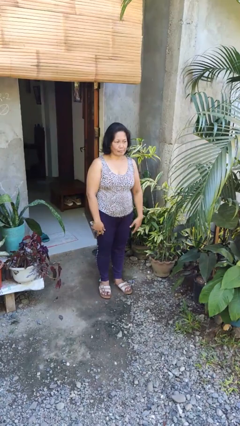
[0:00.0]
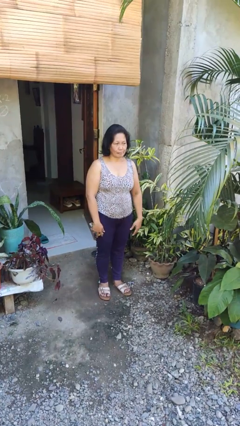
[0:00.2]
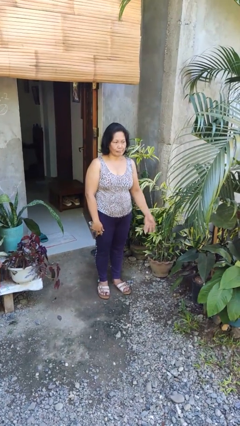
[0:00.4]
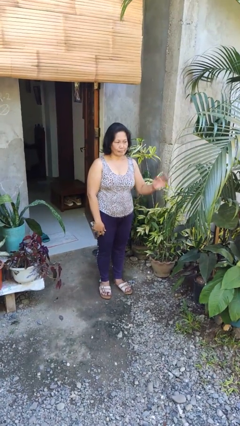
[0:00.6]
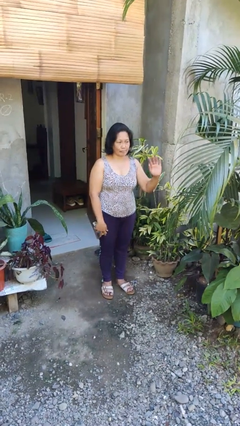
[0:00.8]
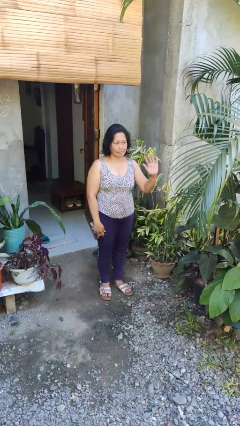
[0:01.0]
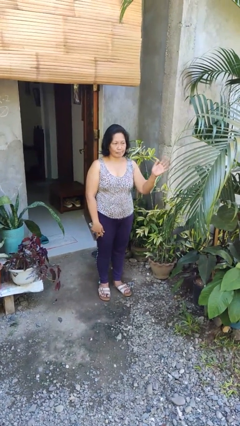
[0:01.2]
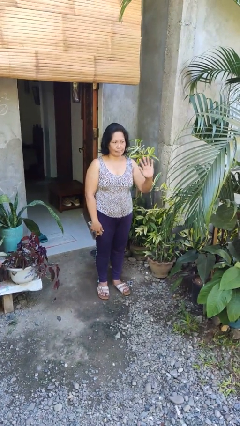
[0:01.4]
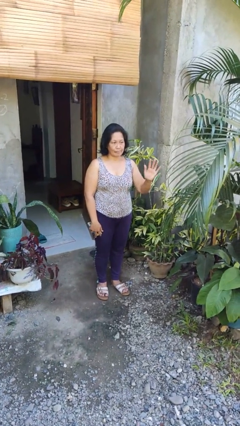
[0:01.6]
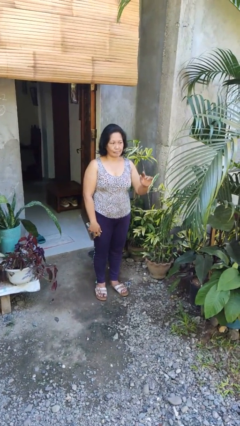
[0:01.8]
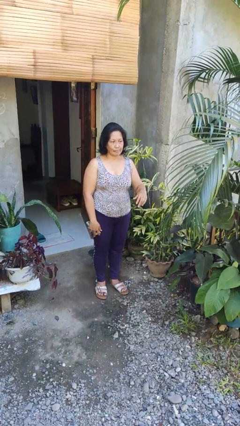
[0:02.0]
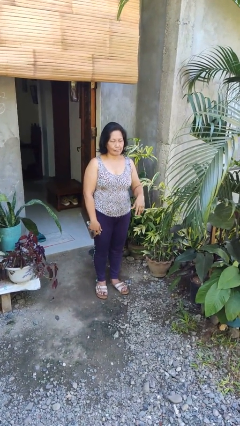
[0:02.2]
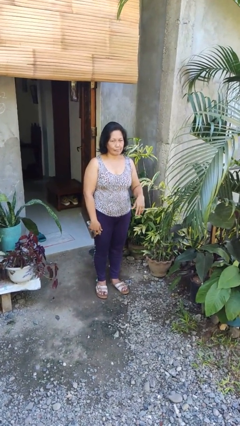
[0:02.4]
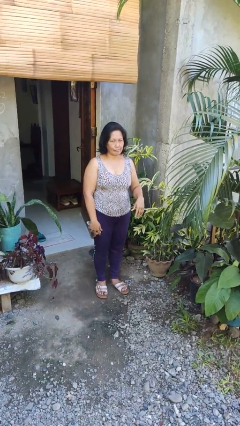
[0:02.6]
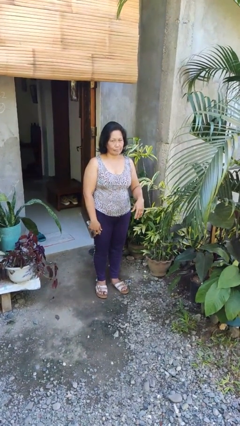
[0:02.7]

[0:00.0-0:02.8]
person waves at person

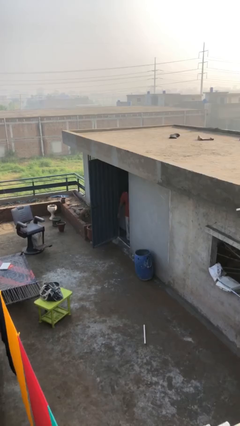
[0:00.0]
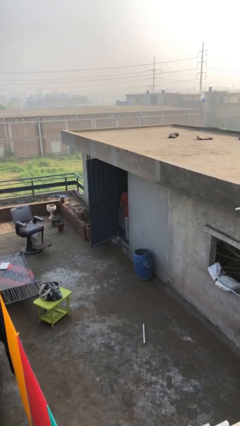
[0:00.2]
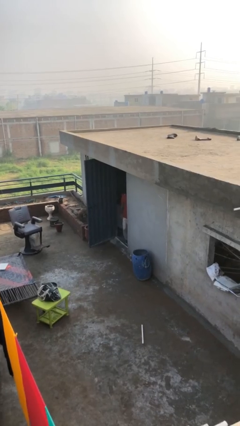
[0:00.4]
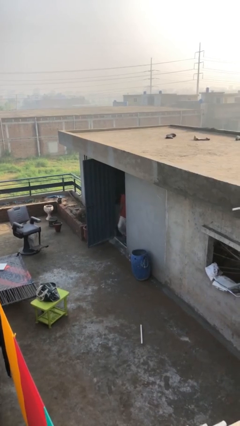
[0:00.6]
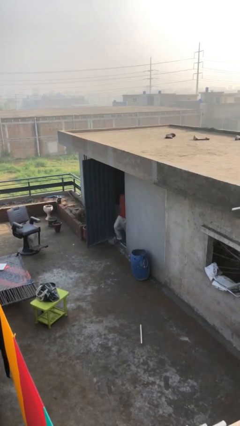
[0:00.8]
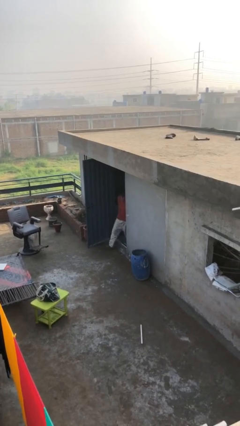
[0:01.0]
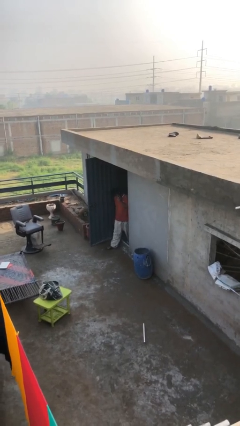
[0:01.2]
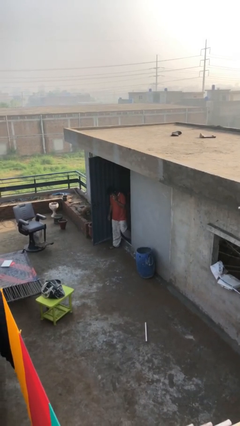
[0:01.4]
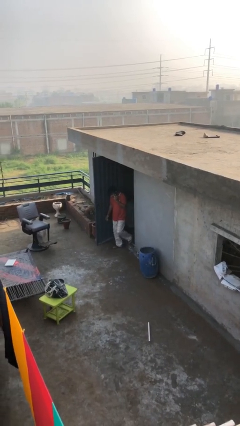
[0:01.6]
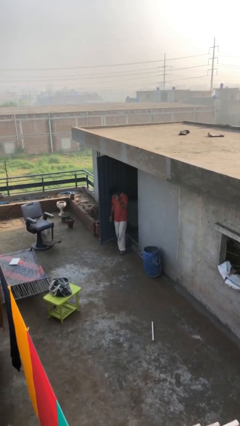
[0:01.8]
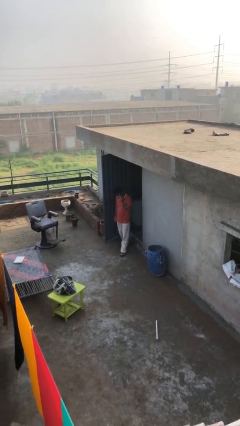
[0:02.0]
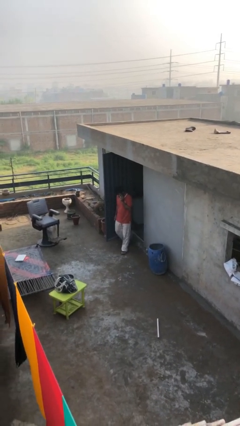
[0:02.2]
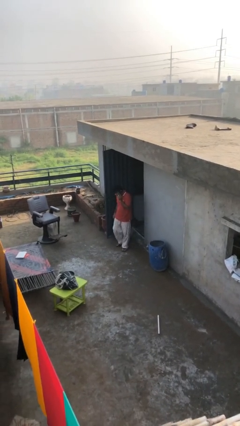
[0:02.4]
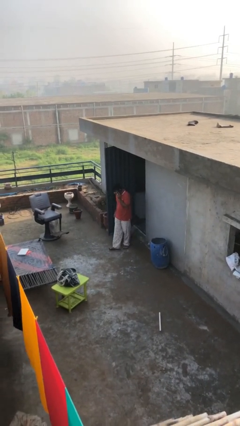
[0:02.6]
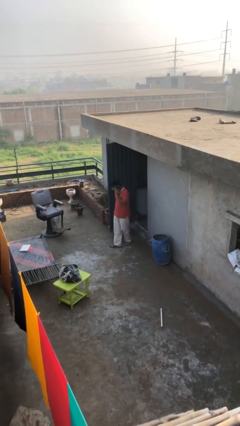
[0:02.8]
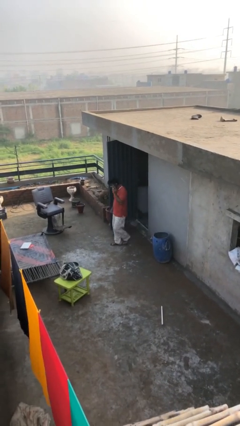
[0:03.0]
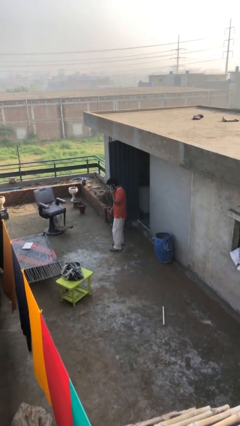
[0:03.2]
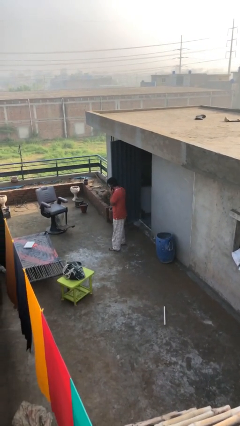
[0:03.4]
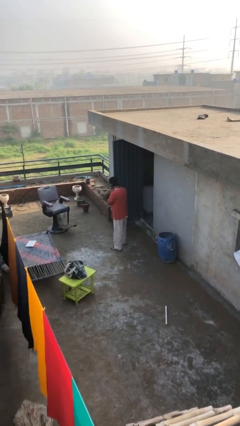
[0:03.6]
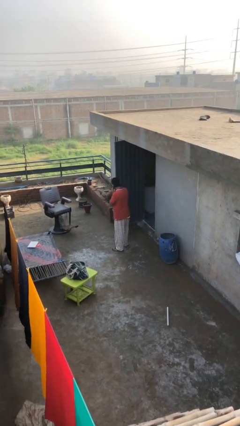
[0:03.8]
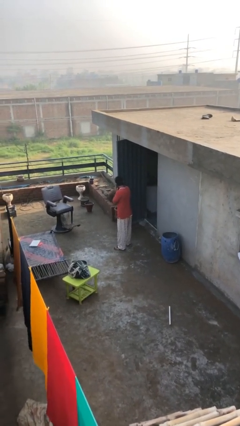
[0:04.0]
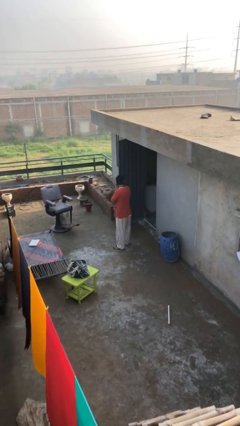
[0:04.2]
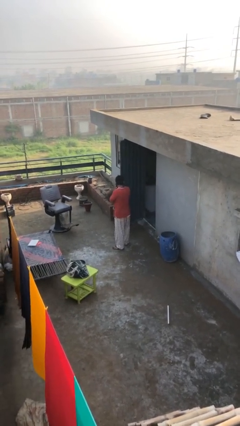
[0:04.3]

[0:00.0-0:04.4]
person enters scene through structure

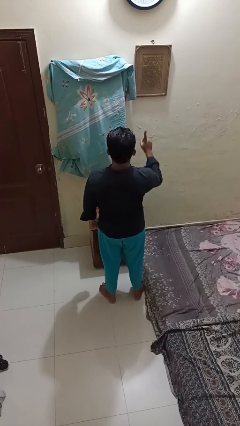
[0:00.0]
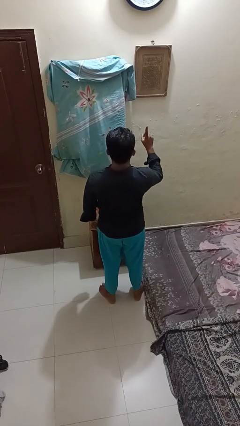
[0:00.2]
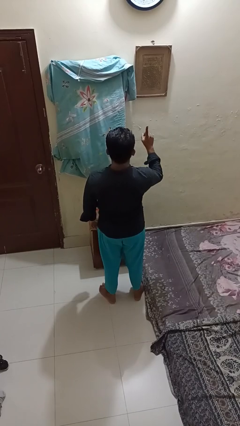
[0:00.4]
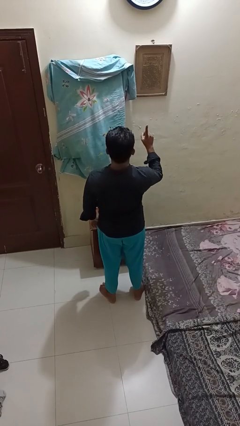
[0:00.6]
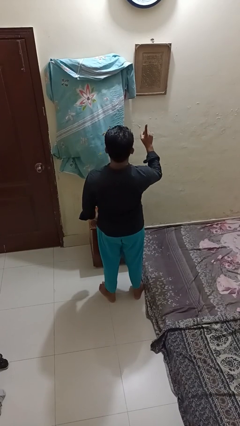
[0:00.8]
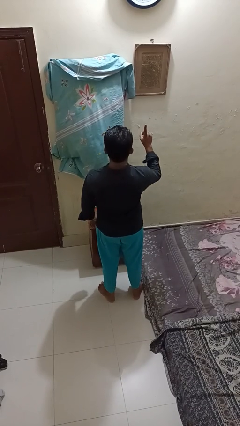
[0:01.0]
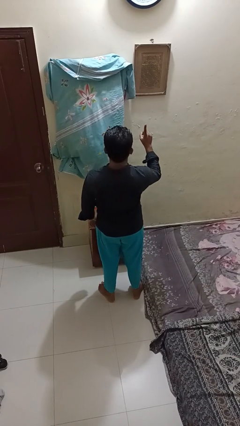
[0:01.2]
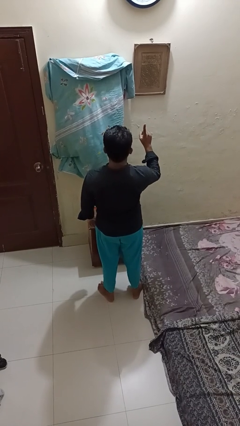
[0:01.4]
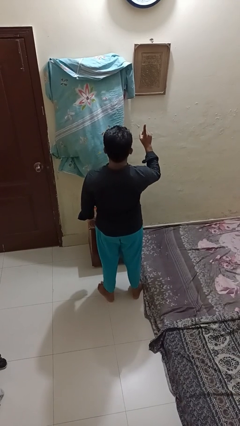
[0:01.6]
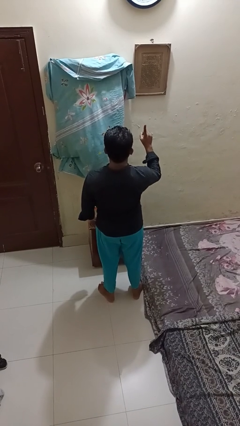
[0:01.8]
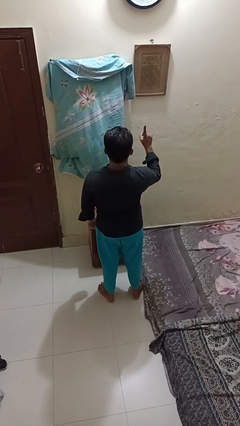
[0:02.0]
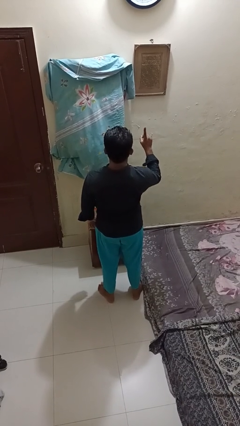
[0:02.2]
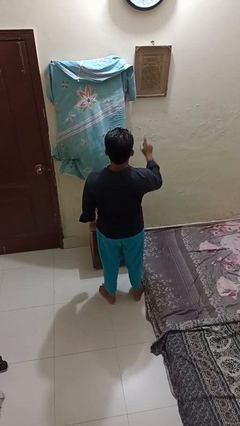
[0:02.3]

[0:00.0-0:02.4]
person gestures number one

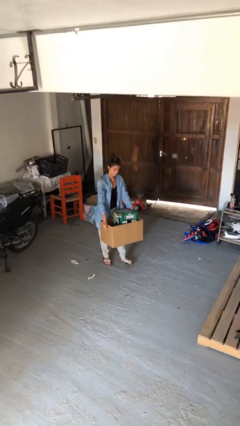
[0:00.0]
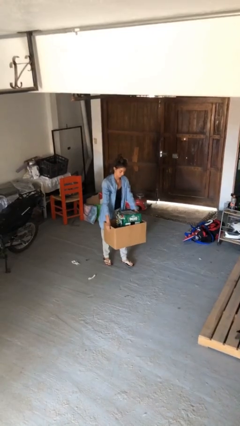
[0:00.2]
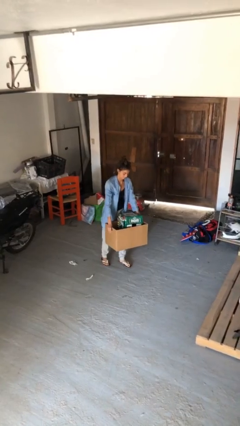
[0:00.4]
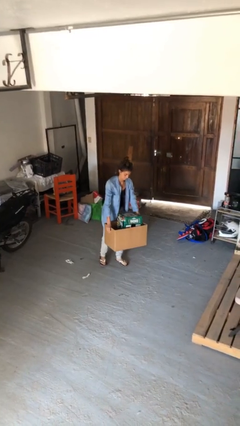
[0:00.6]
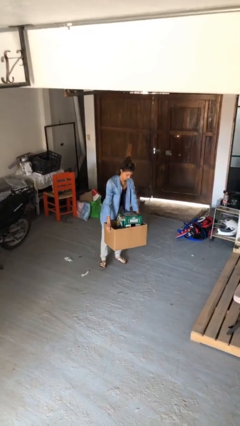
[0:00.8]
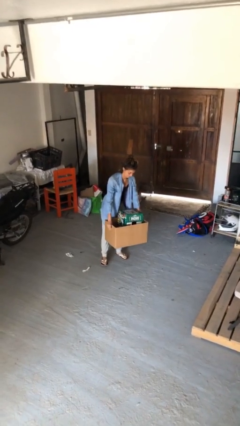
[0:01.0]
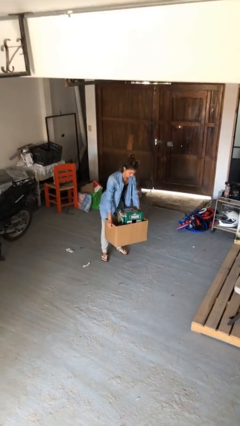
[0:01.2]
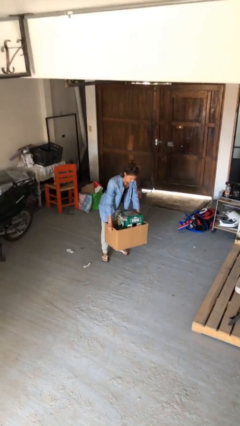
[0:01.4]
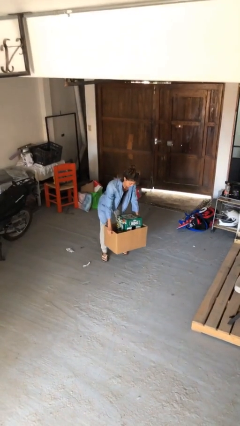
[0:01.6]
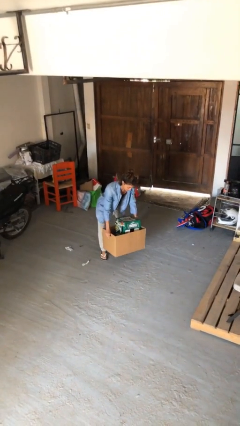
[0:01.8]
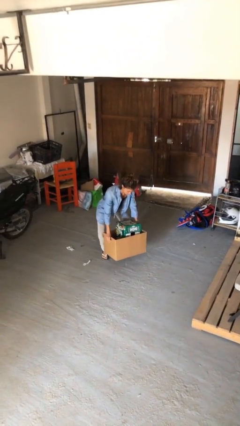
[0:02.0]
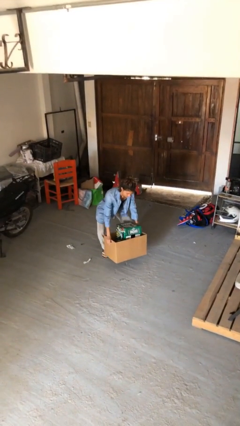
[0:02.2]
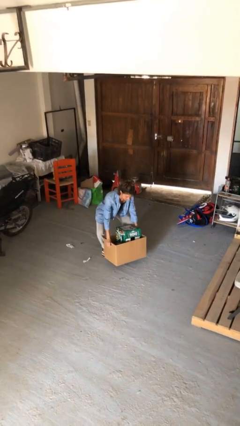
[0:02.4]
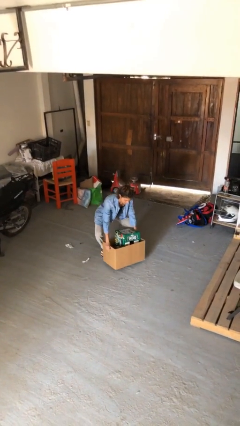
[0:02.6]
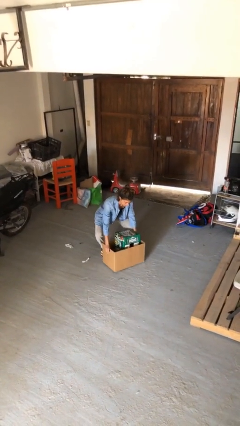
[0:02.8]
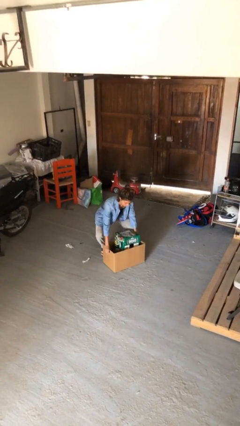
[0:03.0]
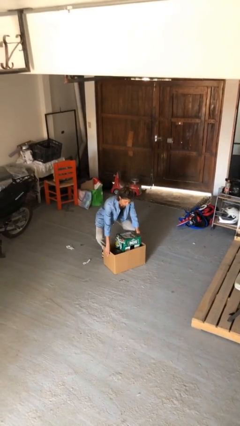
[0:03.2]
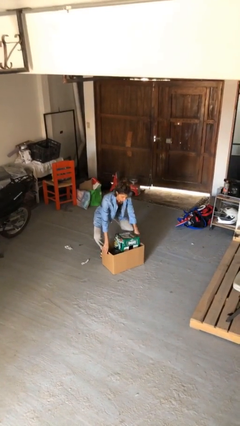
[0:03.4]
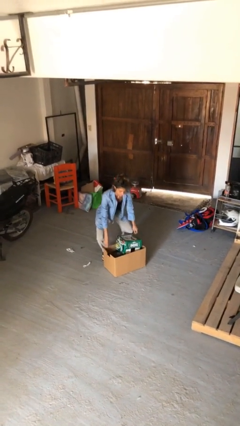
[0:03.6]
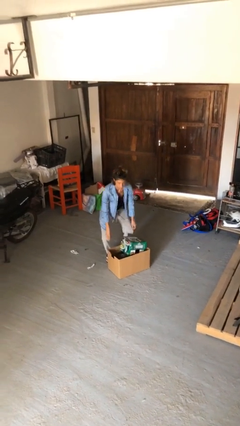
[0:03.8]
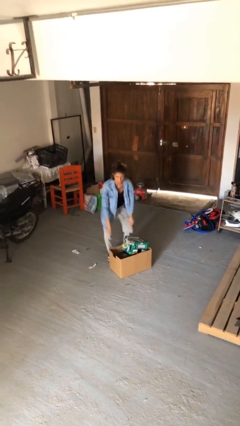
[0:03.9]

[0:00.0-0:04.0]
person puts down object on floor

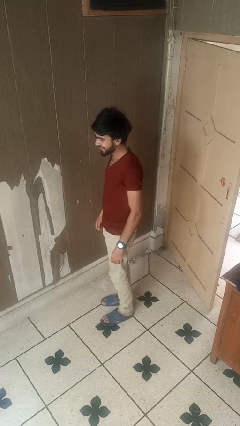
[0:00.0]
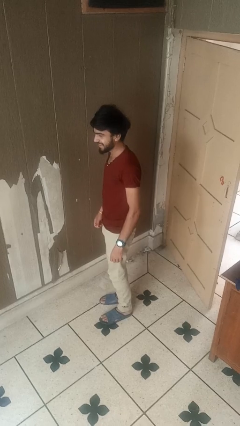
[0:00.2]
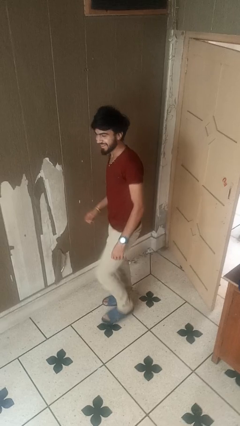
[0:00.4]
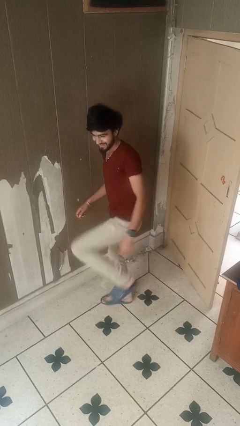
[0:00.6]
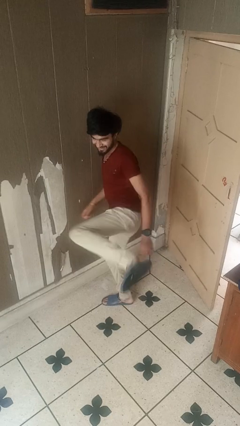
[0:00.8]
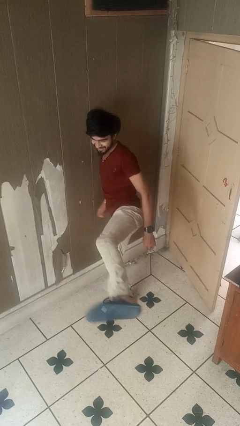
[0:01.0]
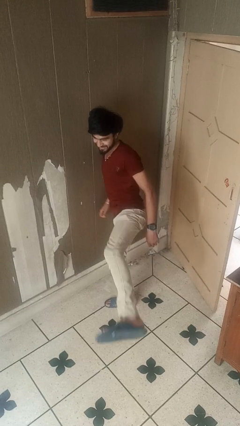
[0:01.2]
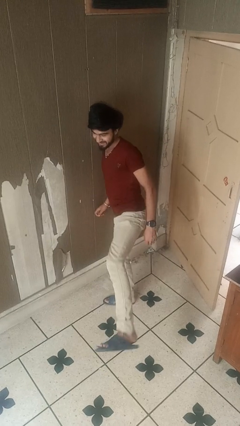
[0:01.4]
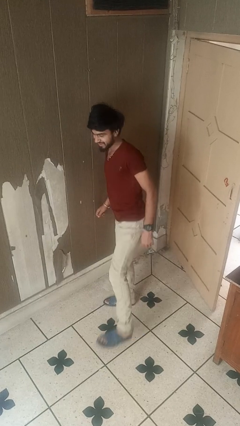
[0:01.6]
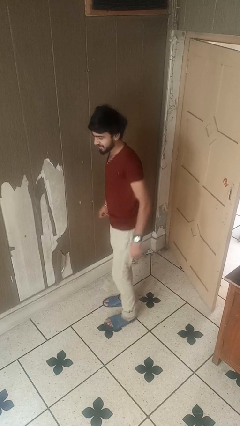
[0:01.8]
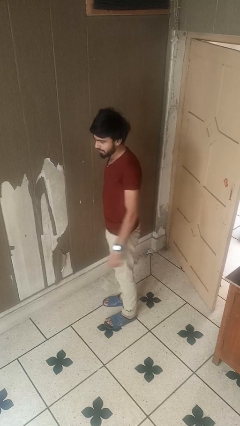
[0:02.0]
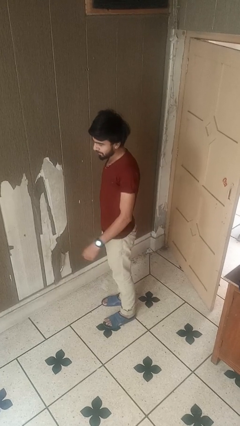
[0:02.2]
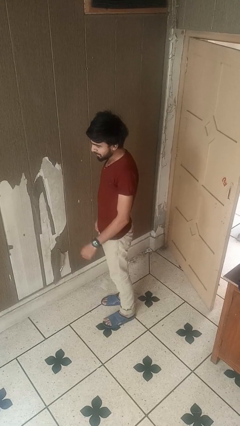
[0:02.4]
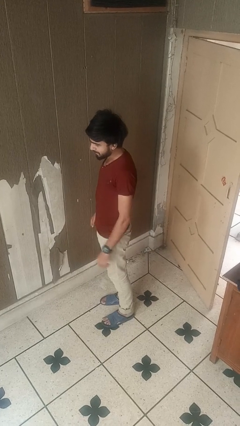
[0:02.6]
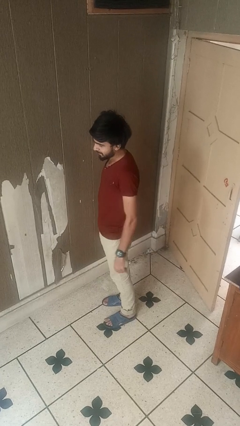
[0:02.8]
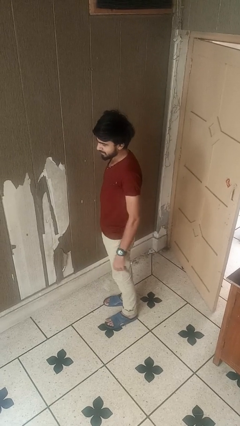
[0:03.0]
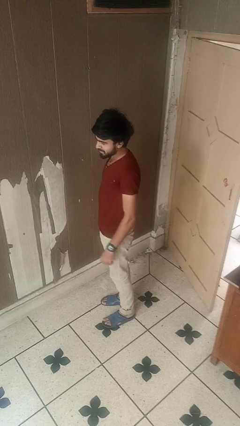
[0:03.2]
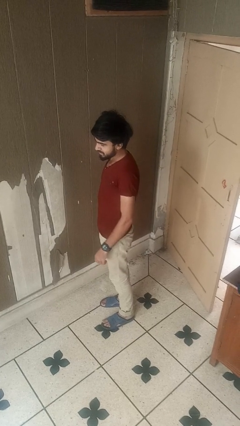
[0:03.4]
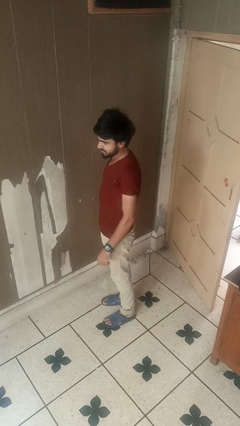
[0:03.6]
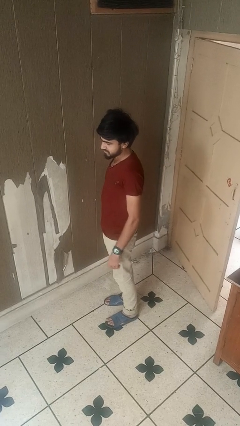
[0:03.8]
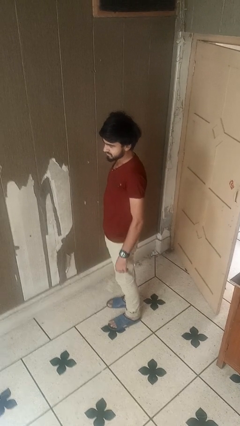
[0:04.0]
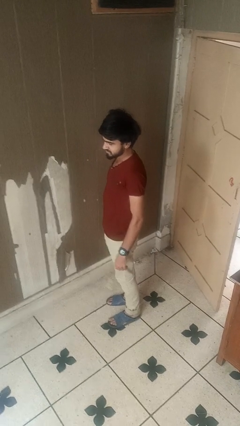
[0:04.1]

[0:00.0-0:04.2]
person karate kicks
